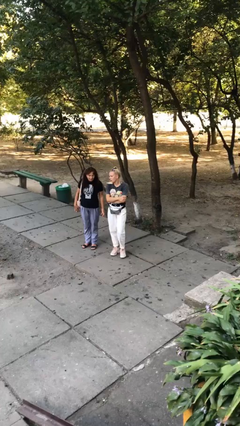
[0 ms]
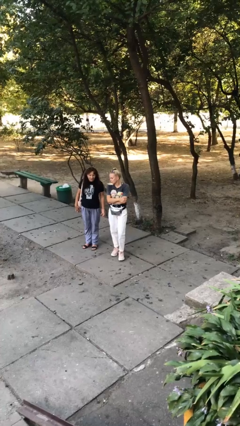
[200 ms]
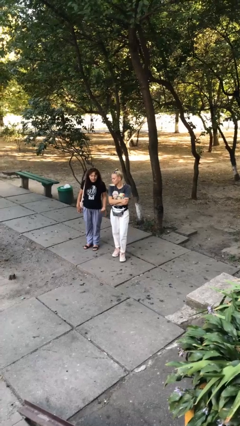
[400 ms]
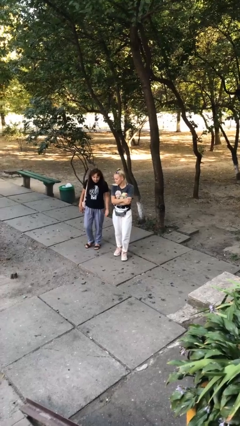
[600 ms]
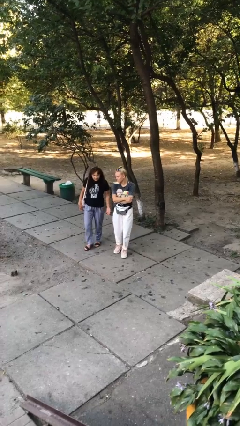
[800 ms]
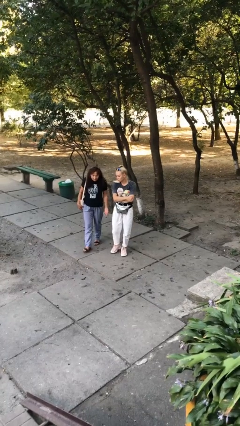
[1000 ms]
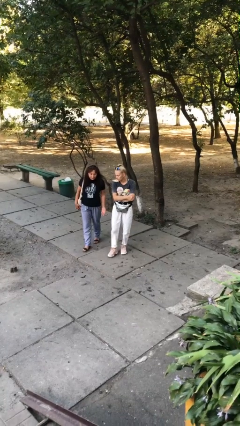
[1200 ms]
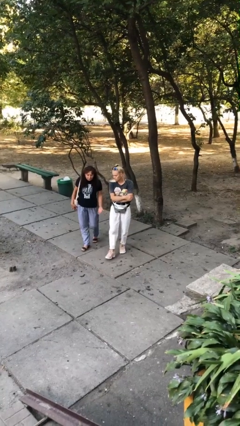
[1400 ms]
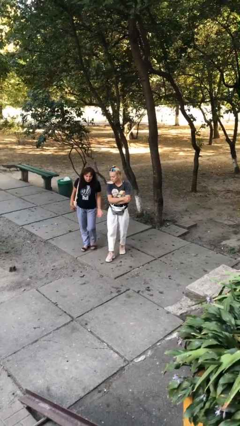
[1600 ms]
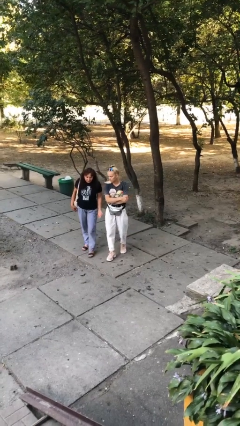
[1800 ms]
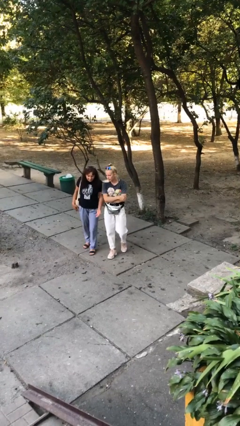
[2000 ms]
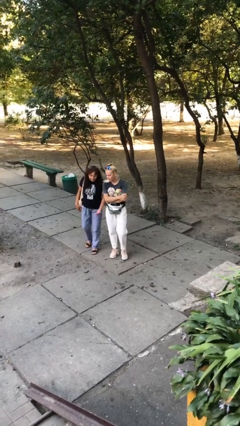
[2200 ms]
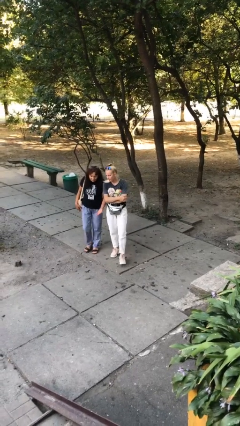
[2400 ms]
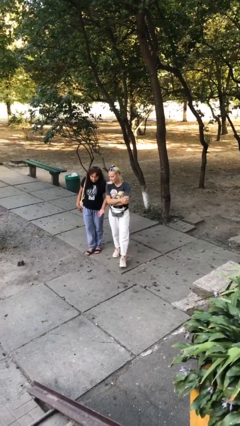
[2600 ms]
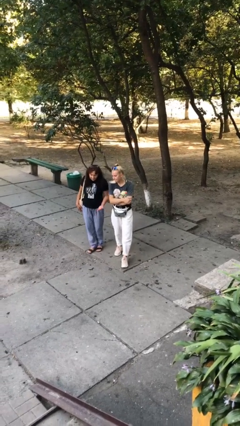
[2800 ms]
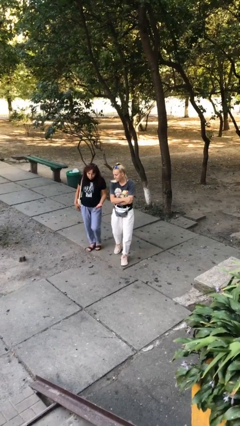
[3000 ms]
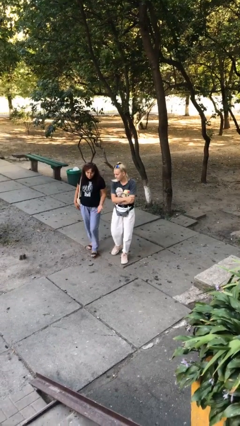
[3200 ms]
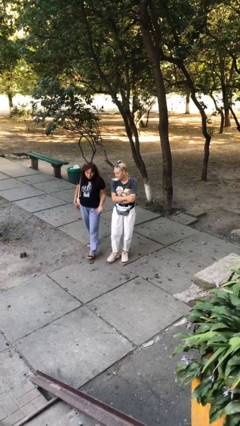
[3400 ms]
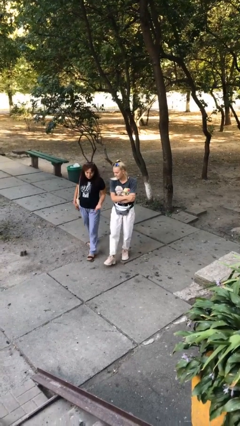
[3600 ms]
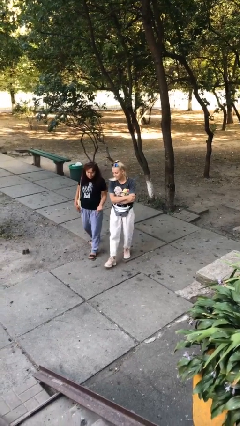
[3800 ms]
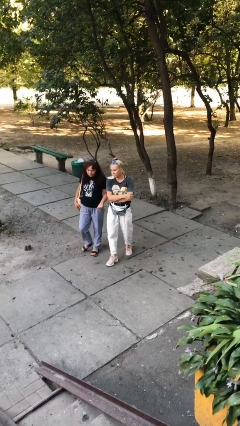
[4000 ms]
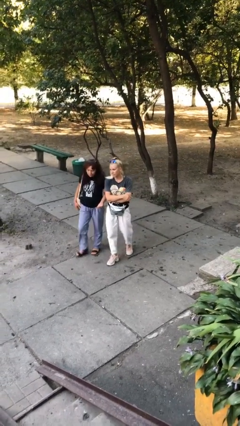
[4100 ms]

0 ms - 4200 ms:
person talks to person

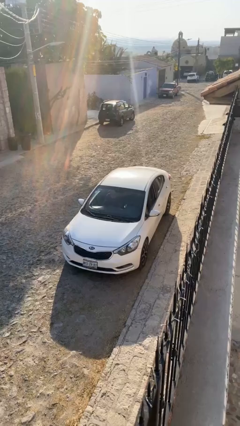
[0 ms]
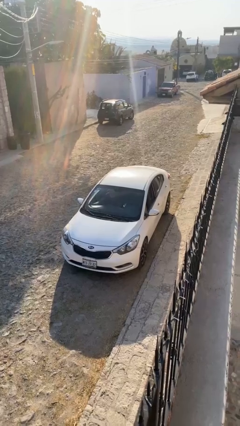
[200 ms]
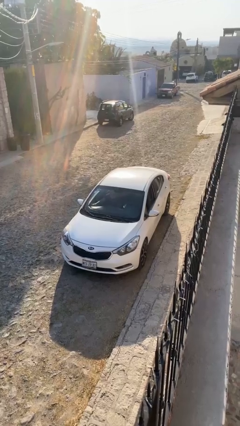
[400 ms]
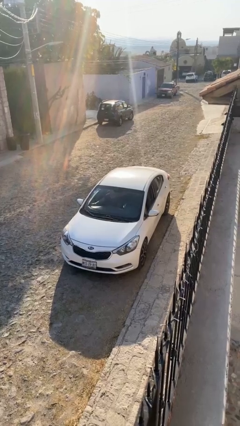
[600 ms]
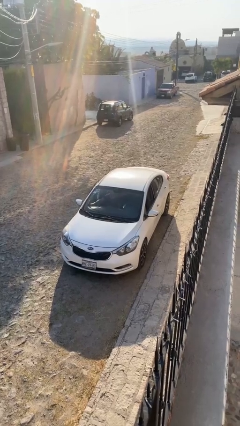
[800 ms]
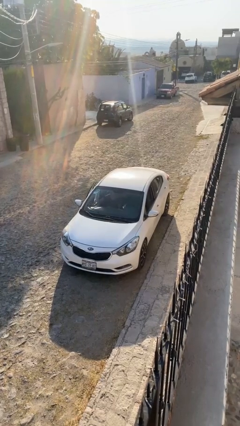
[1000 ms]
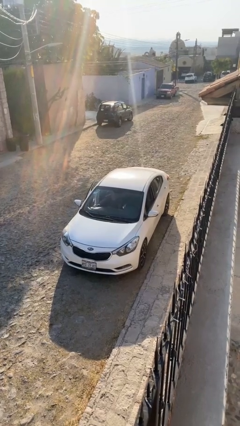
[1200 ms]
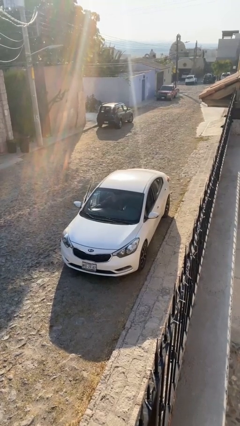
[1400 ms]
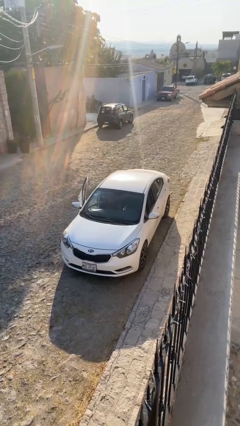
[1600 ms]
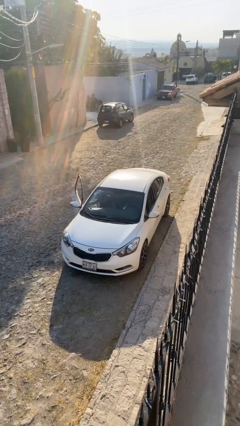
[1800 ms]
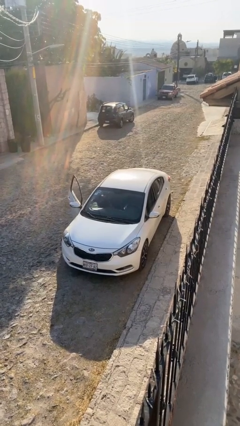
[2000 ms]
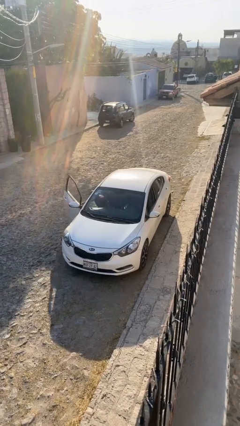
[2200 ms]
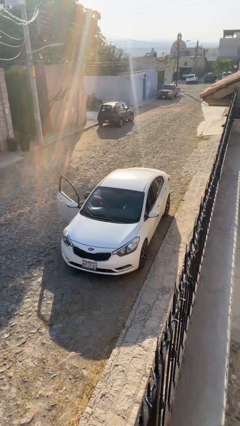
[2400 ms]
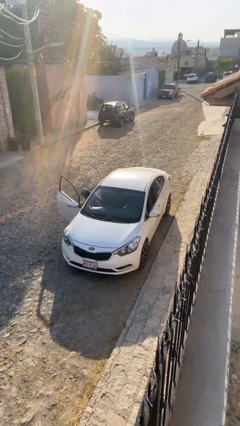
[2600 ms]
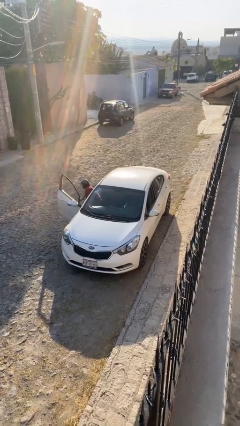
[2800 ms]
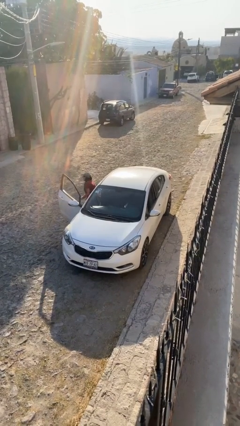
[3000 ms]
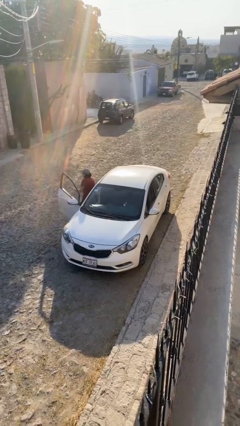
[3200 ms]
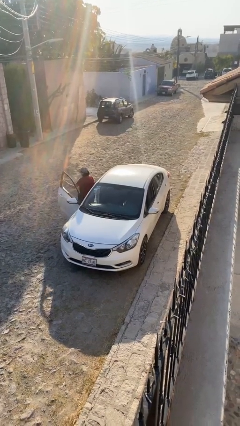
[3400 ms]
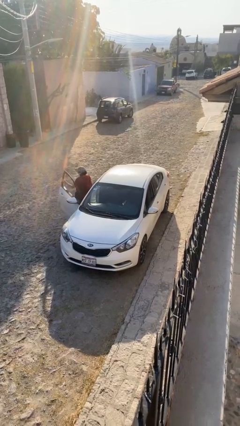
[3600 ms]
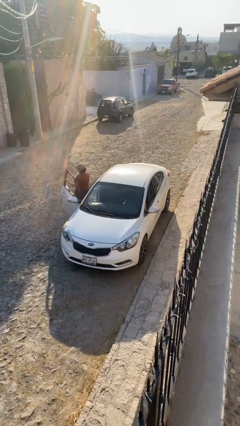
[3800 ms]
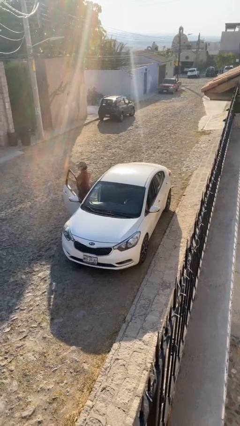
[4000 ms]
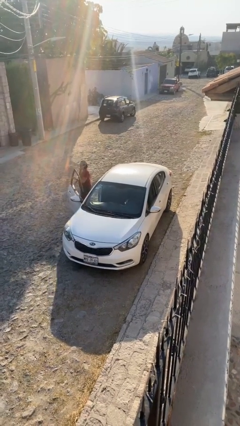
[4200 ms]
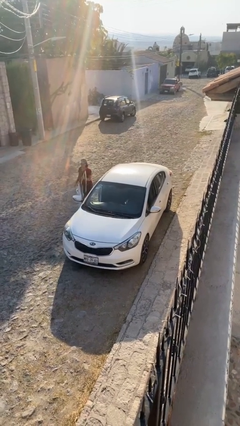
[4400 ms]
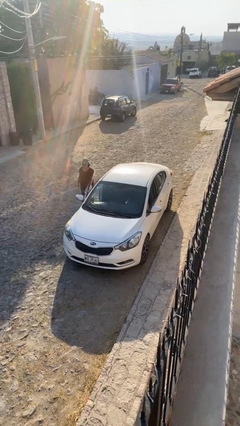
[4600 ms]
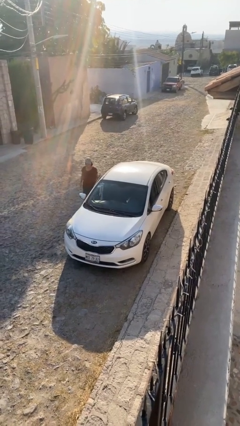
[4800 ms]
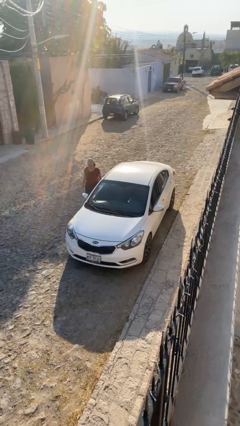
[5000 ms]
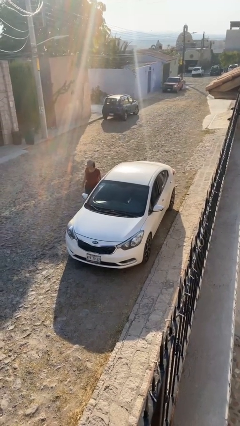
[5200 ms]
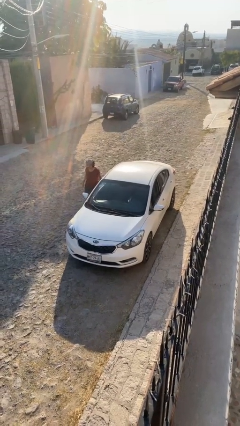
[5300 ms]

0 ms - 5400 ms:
car drops off person

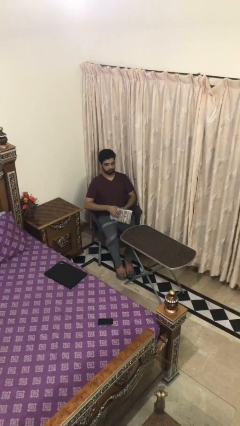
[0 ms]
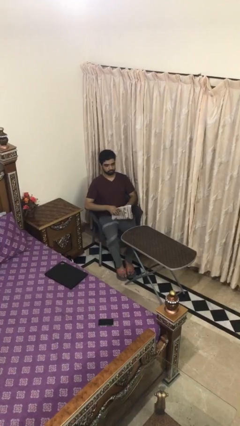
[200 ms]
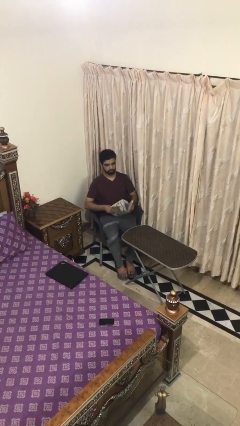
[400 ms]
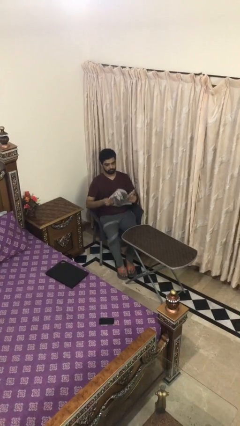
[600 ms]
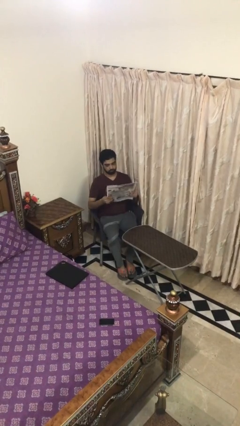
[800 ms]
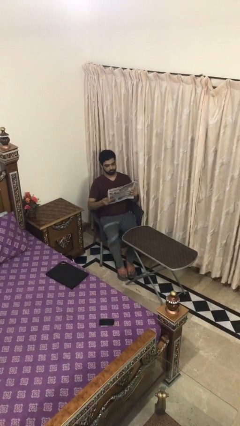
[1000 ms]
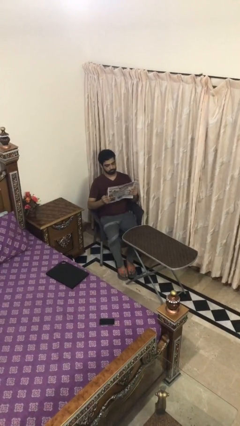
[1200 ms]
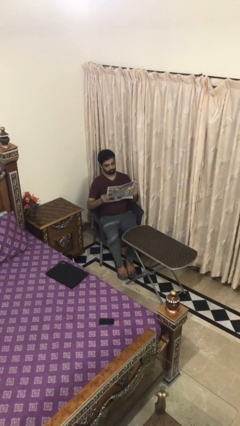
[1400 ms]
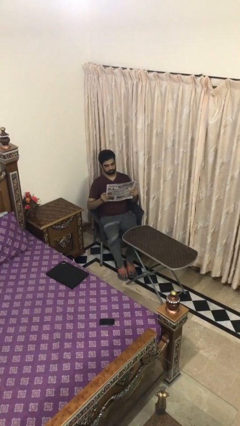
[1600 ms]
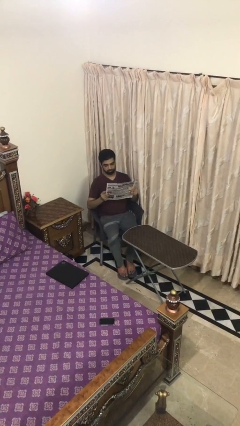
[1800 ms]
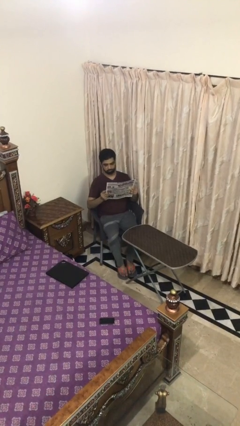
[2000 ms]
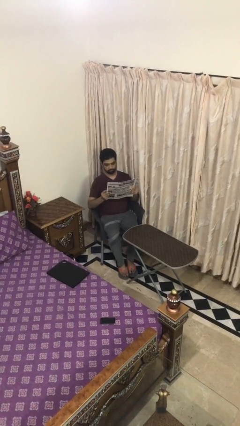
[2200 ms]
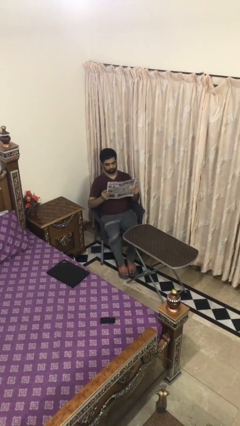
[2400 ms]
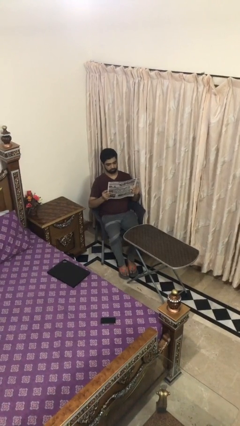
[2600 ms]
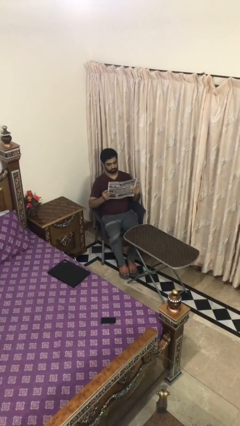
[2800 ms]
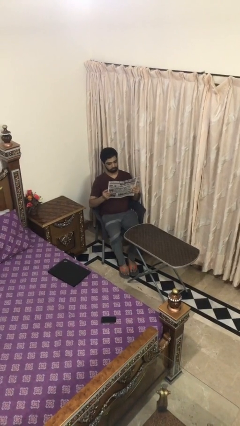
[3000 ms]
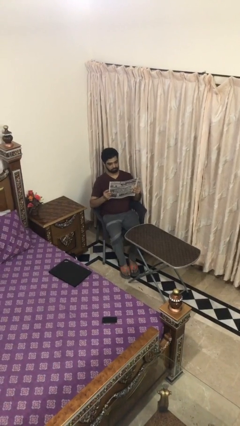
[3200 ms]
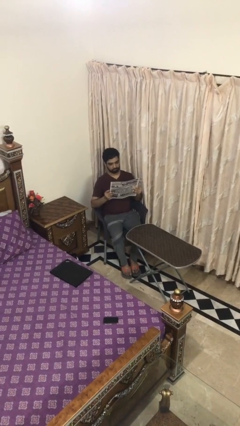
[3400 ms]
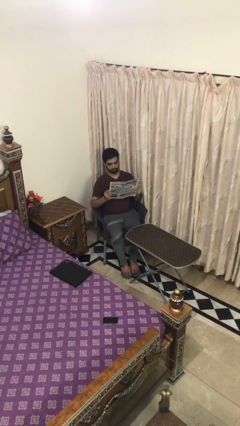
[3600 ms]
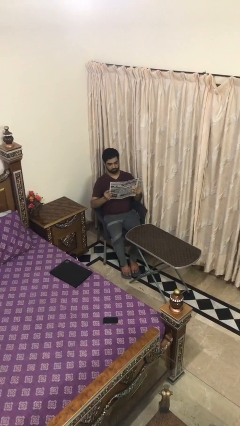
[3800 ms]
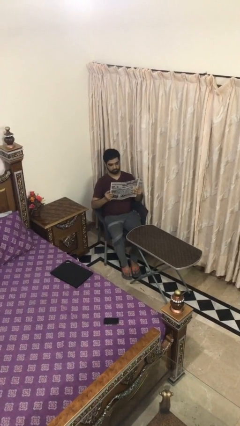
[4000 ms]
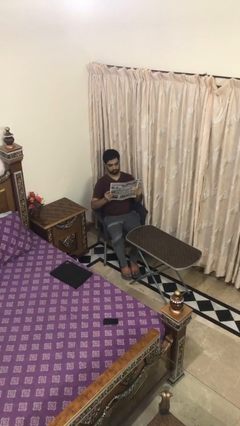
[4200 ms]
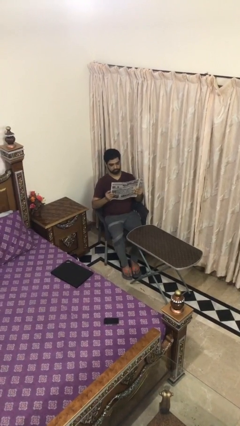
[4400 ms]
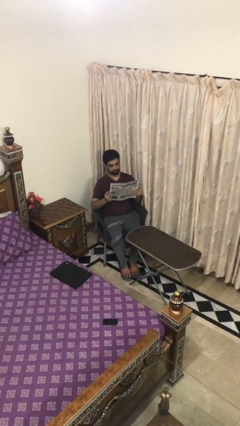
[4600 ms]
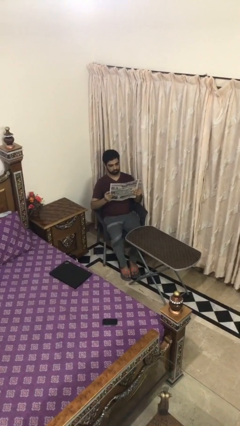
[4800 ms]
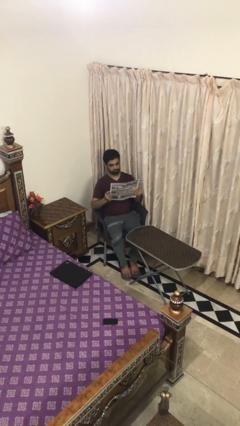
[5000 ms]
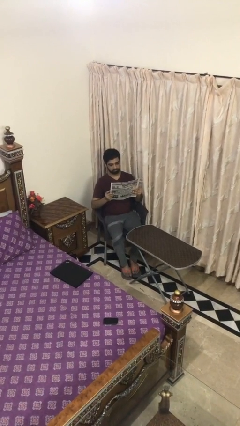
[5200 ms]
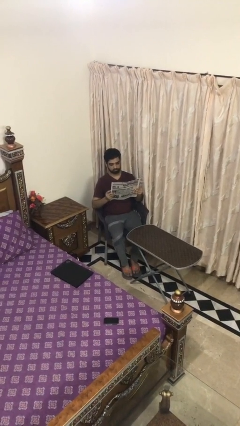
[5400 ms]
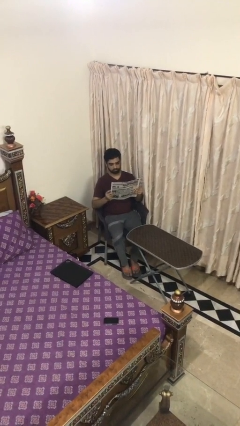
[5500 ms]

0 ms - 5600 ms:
person reads document

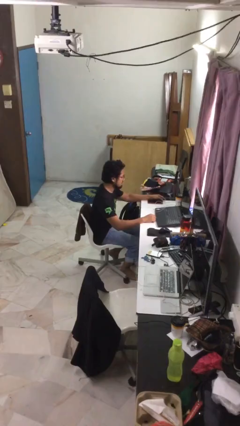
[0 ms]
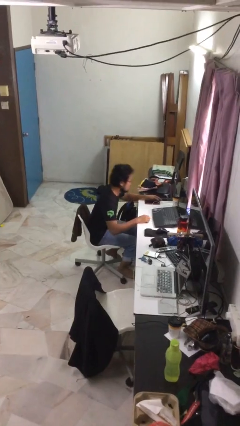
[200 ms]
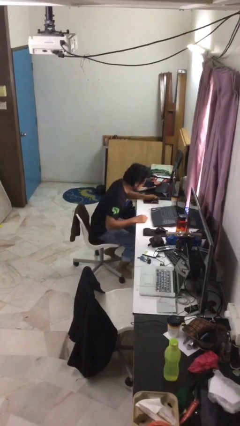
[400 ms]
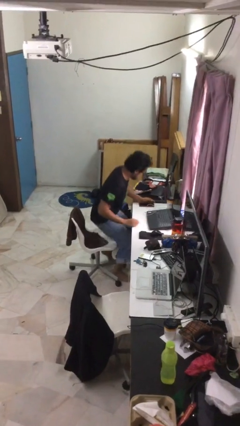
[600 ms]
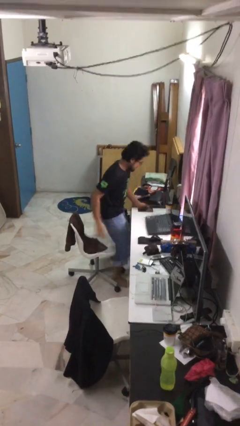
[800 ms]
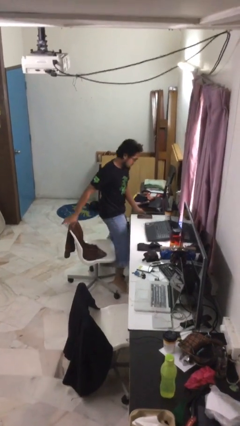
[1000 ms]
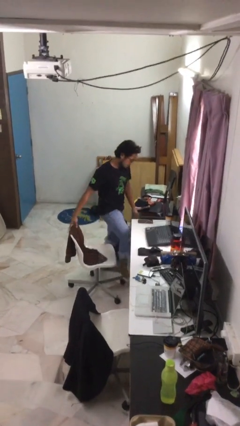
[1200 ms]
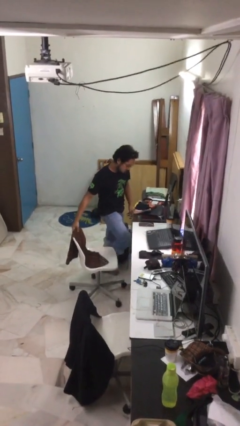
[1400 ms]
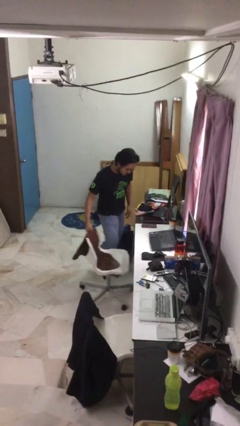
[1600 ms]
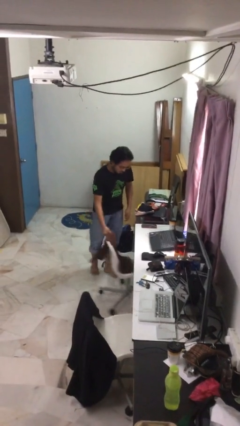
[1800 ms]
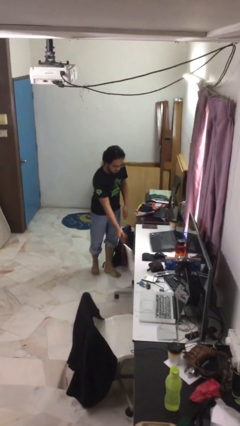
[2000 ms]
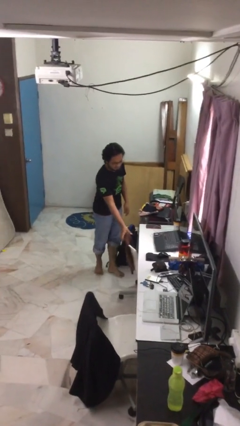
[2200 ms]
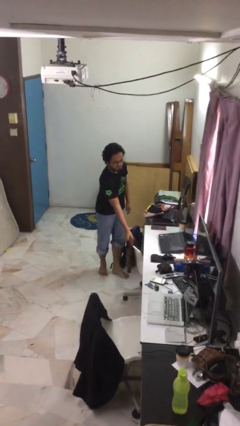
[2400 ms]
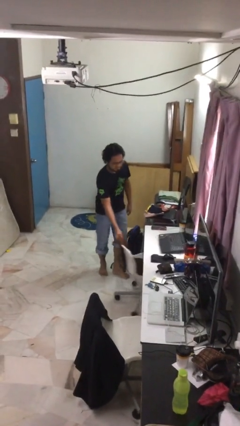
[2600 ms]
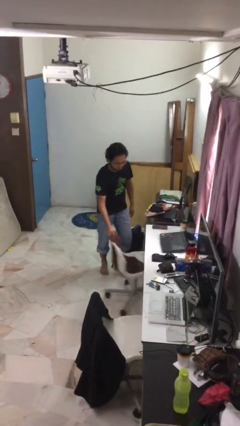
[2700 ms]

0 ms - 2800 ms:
person stands up
